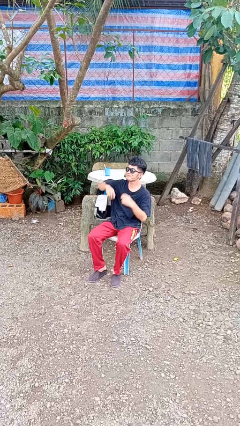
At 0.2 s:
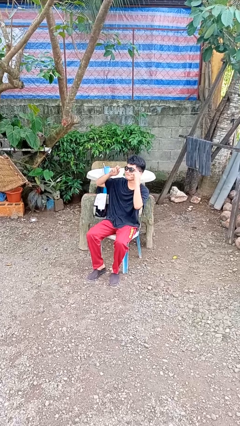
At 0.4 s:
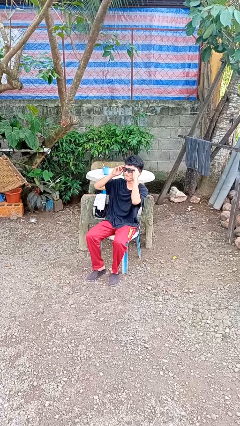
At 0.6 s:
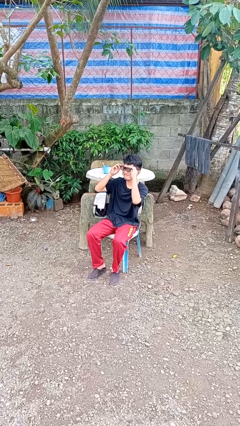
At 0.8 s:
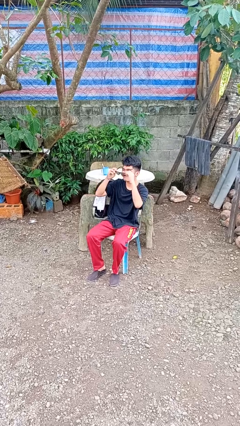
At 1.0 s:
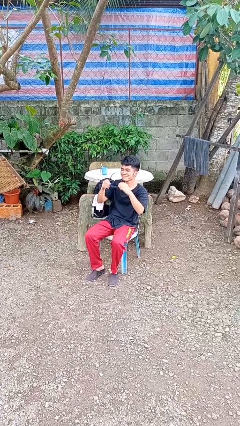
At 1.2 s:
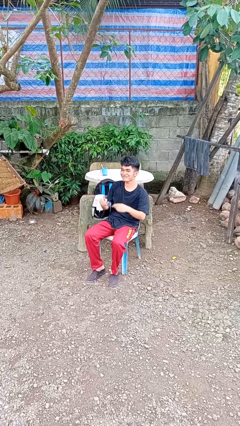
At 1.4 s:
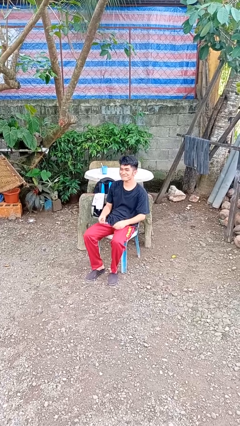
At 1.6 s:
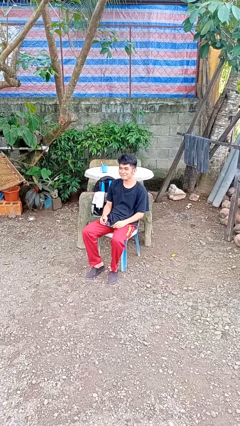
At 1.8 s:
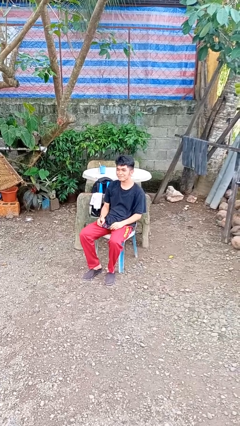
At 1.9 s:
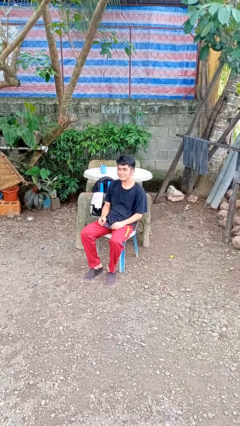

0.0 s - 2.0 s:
person takes off sunglasses

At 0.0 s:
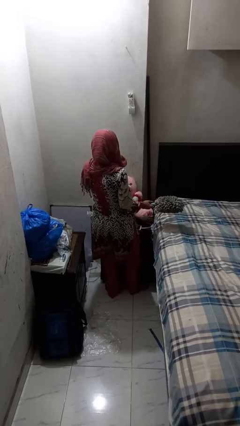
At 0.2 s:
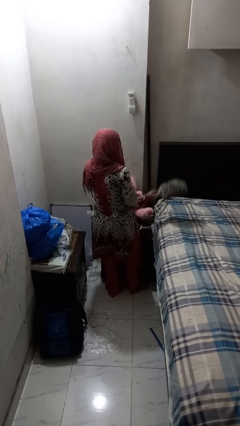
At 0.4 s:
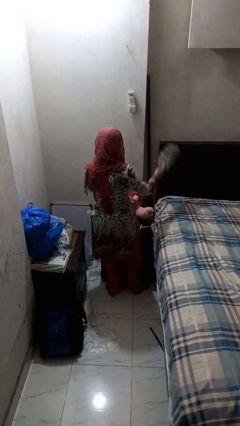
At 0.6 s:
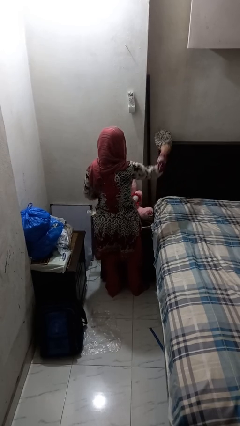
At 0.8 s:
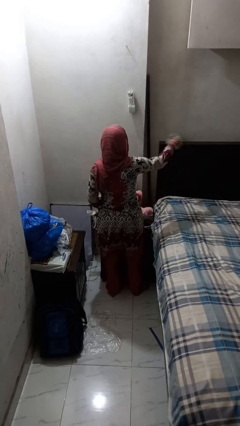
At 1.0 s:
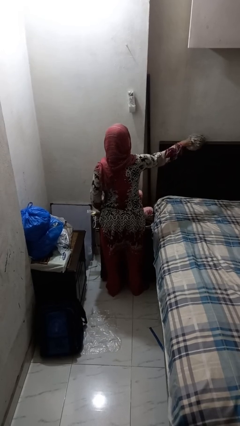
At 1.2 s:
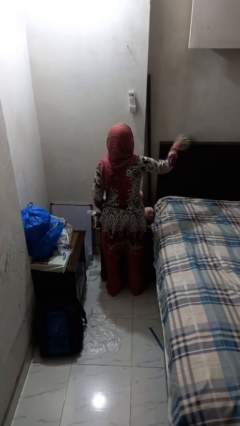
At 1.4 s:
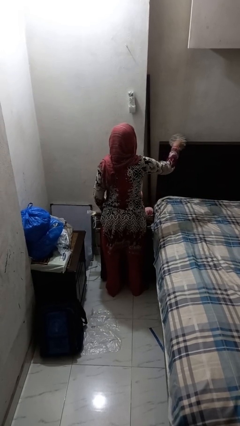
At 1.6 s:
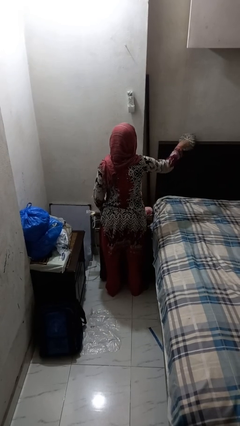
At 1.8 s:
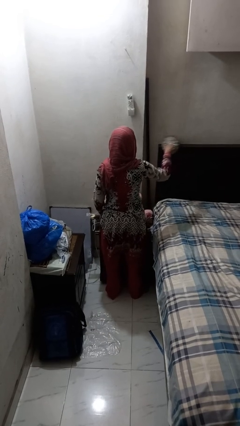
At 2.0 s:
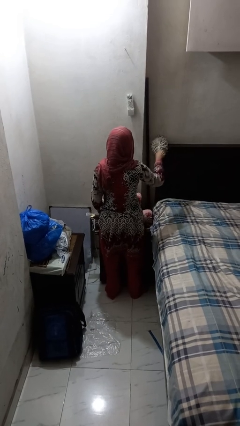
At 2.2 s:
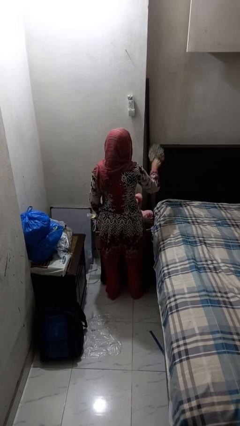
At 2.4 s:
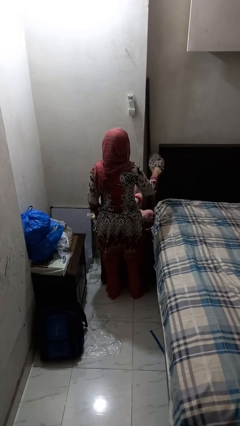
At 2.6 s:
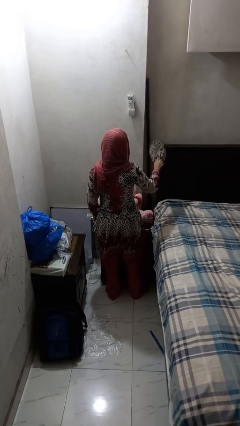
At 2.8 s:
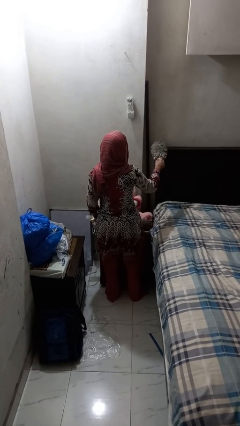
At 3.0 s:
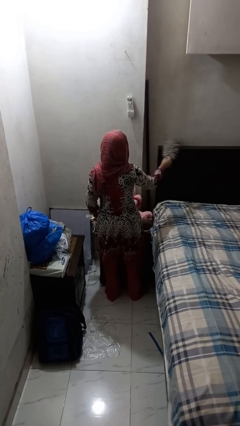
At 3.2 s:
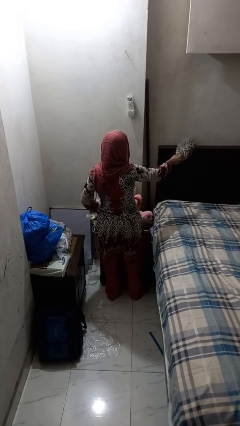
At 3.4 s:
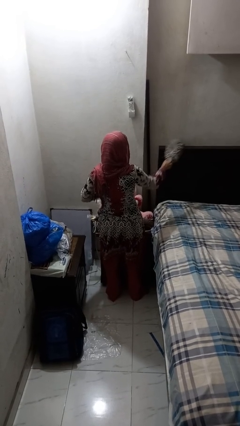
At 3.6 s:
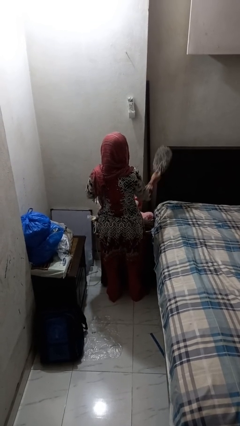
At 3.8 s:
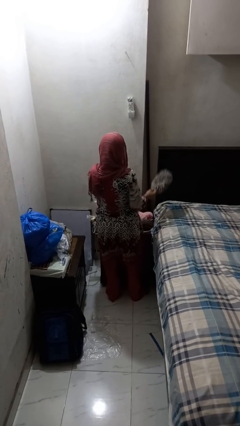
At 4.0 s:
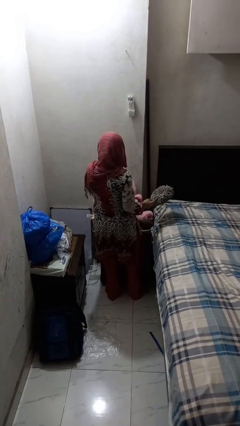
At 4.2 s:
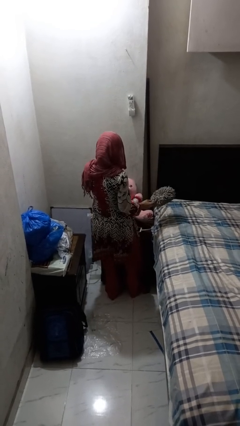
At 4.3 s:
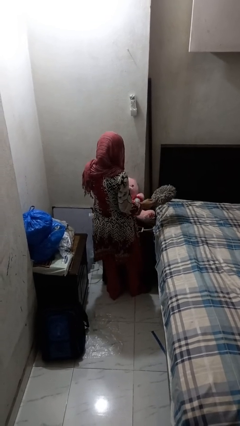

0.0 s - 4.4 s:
person dusts furniture

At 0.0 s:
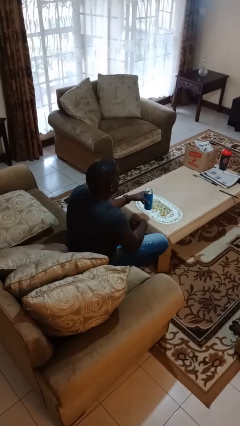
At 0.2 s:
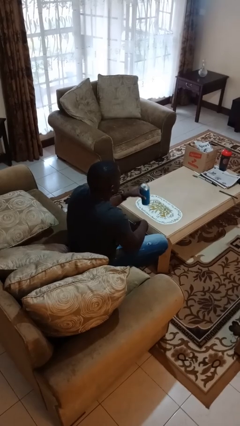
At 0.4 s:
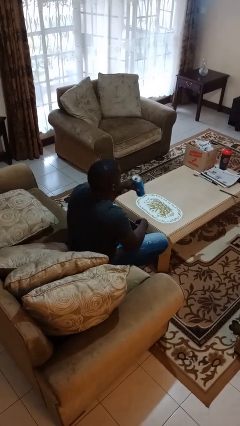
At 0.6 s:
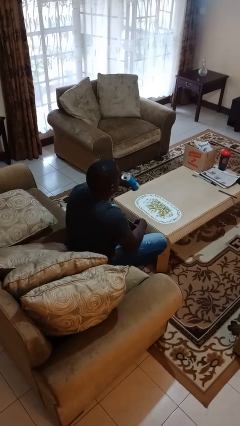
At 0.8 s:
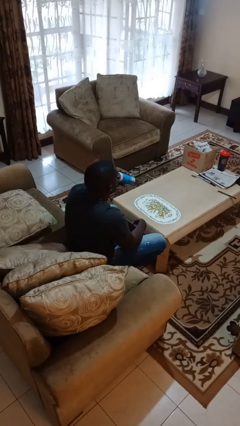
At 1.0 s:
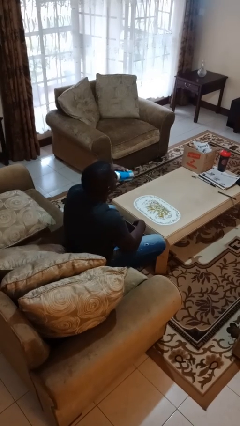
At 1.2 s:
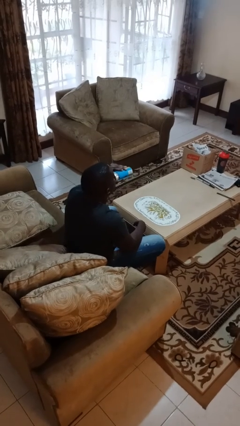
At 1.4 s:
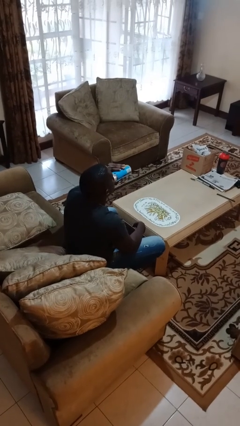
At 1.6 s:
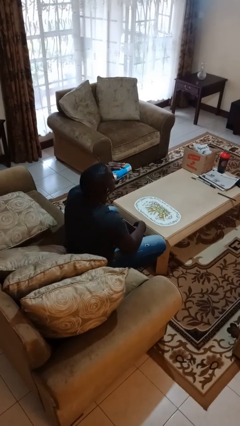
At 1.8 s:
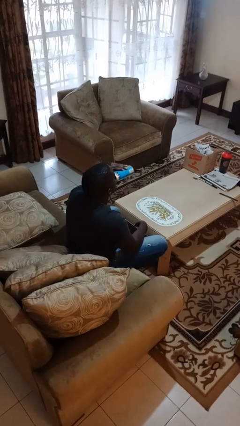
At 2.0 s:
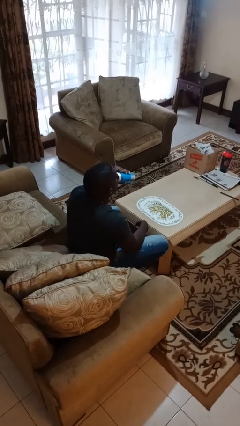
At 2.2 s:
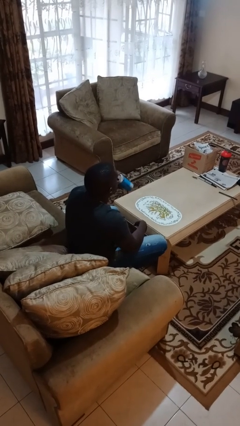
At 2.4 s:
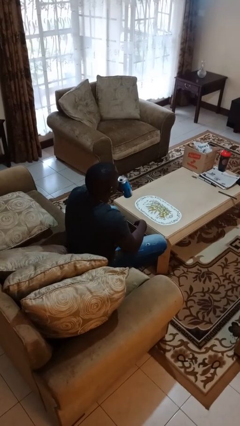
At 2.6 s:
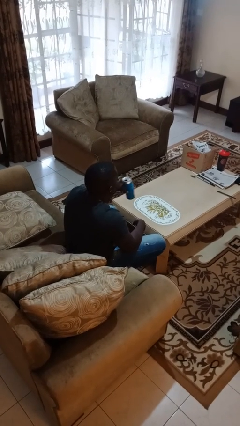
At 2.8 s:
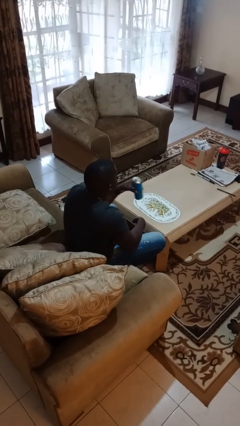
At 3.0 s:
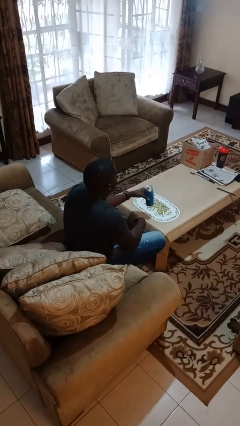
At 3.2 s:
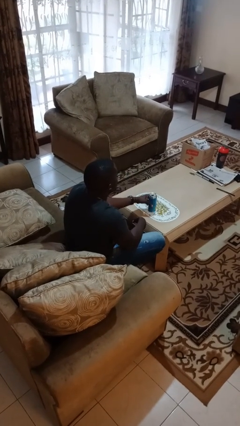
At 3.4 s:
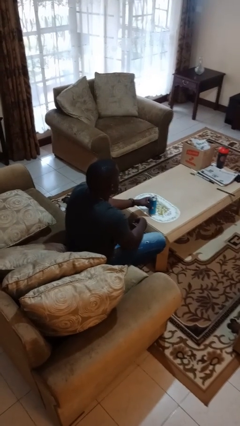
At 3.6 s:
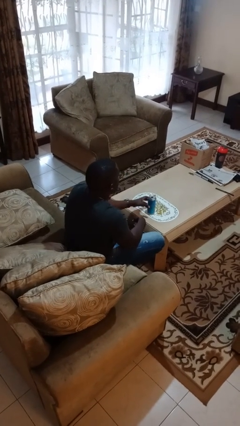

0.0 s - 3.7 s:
person drinks from beverage can

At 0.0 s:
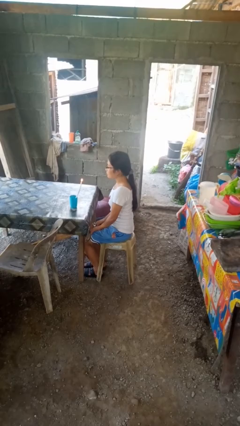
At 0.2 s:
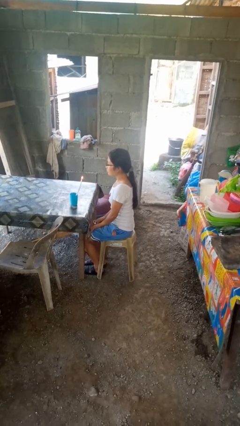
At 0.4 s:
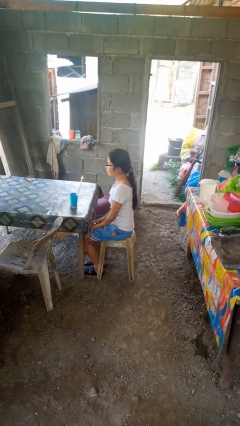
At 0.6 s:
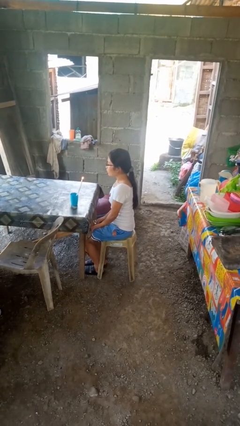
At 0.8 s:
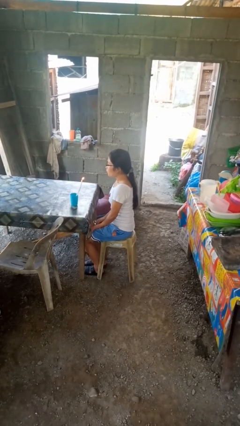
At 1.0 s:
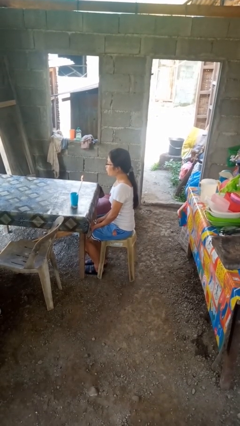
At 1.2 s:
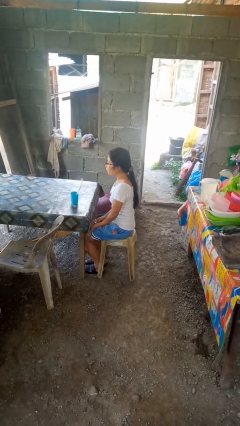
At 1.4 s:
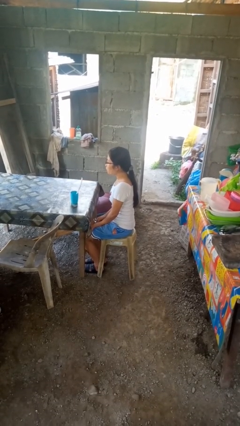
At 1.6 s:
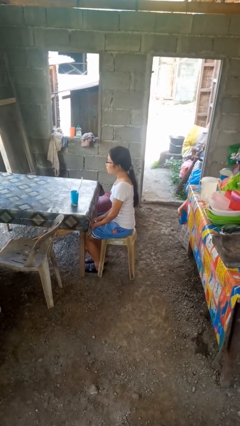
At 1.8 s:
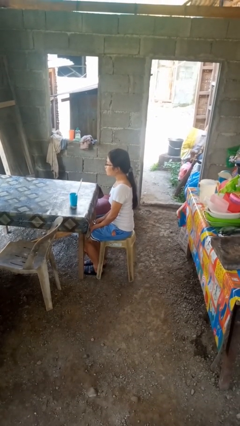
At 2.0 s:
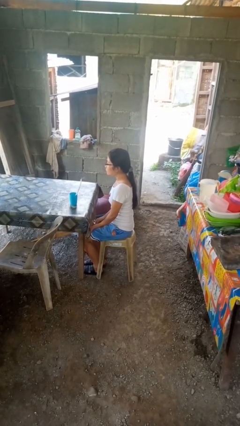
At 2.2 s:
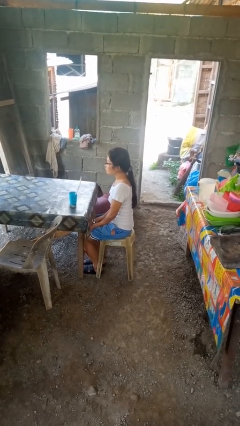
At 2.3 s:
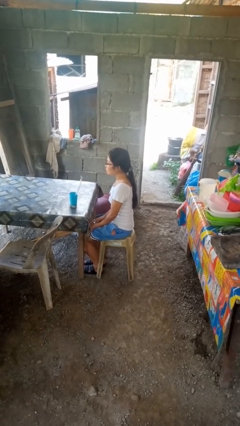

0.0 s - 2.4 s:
person extinguishes candle

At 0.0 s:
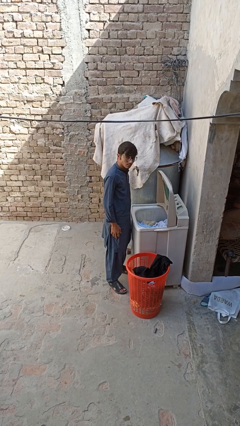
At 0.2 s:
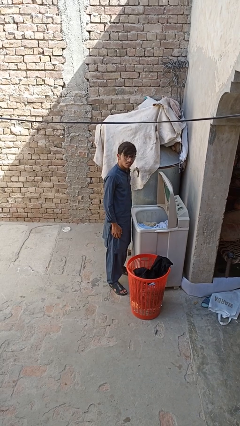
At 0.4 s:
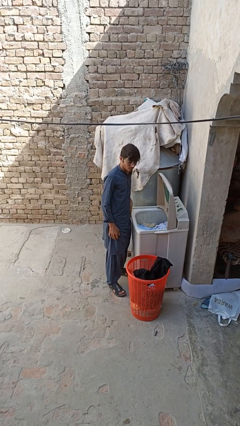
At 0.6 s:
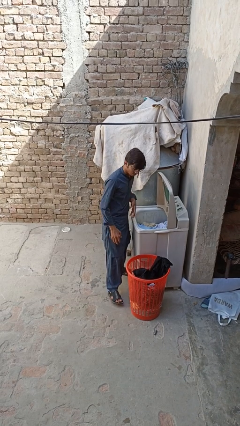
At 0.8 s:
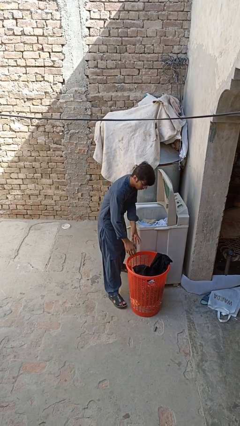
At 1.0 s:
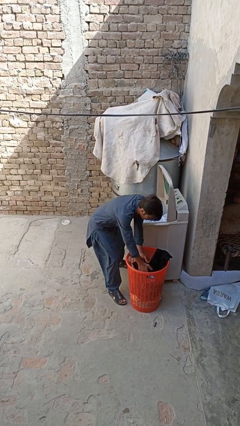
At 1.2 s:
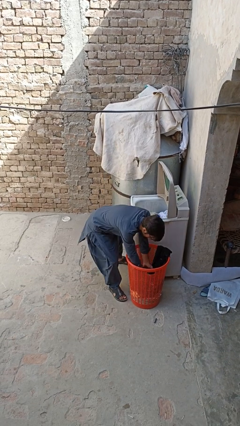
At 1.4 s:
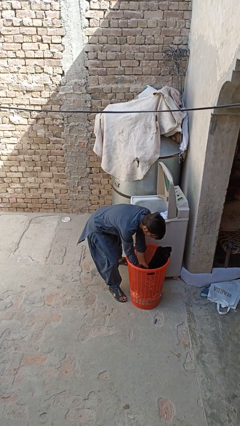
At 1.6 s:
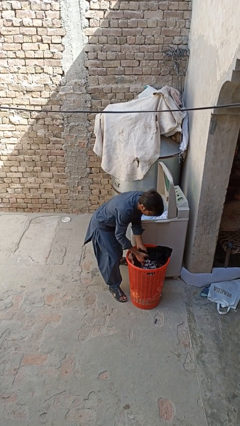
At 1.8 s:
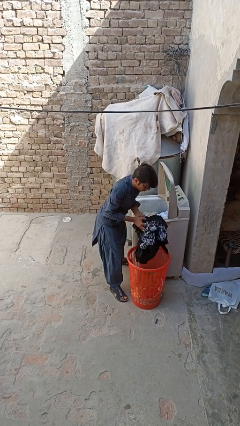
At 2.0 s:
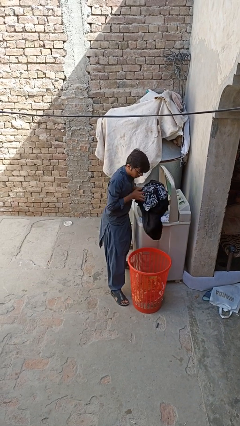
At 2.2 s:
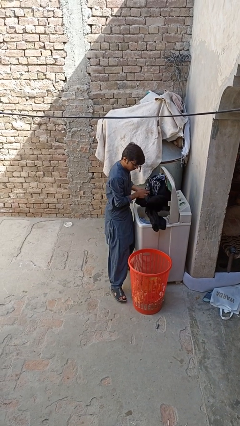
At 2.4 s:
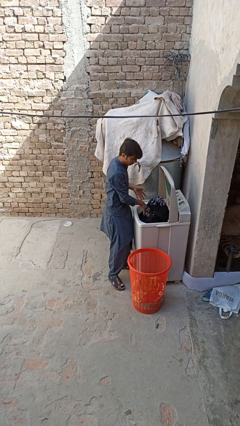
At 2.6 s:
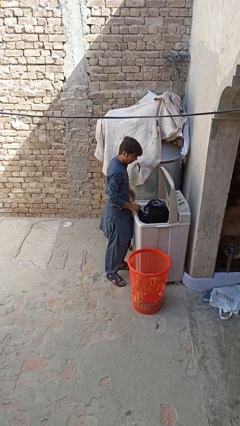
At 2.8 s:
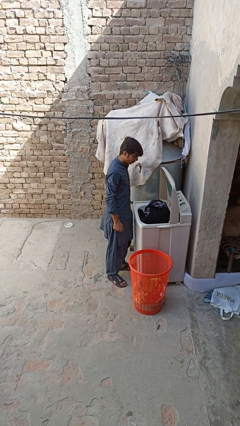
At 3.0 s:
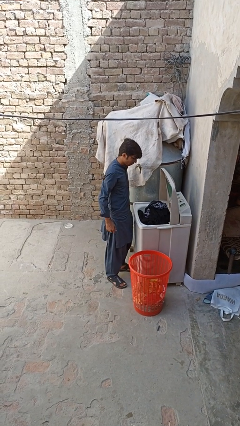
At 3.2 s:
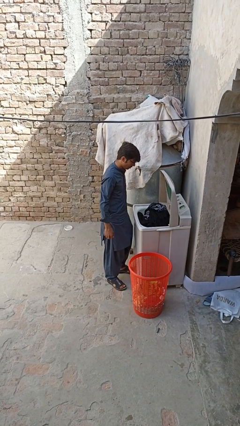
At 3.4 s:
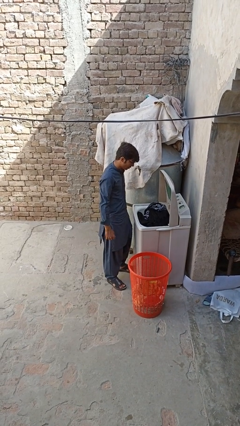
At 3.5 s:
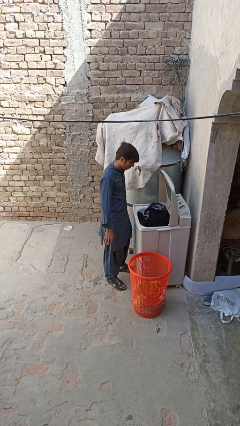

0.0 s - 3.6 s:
person loads clotheswasher

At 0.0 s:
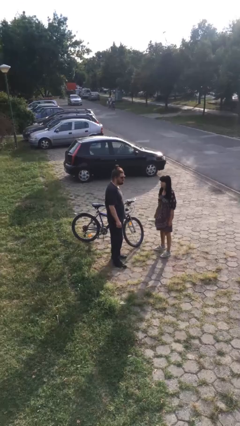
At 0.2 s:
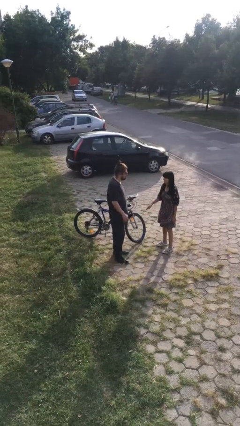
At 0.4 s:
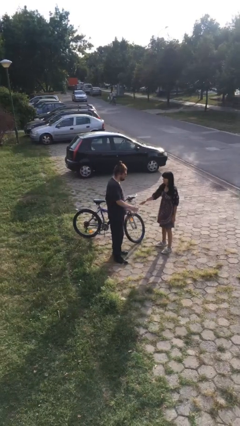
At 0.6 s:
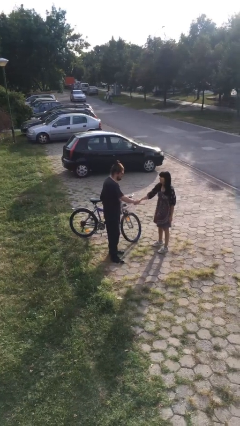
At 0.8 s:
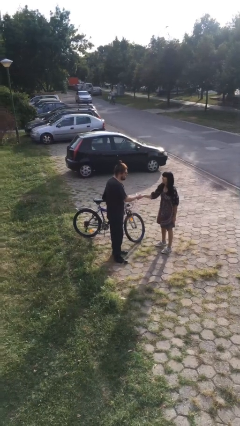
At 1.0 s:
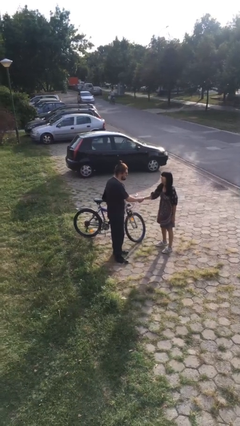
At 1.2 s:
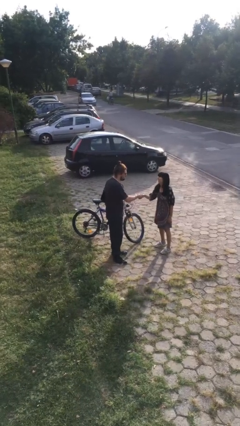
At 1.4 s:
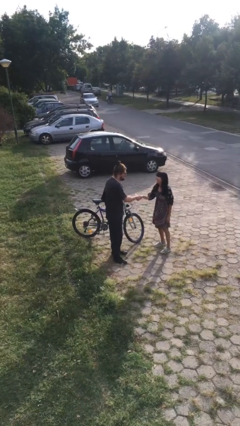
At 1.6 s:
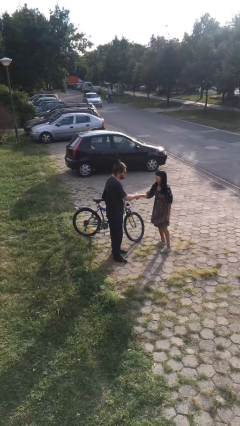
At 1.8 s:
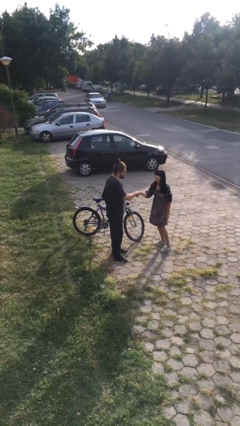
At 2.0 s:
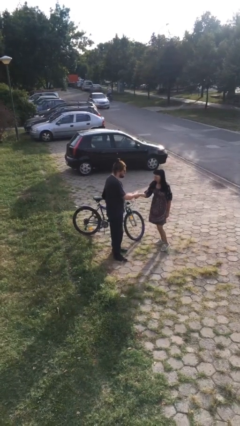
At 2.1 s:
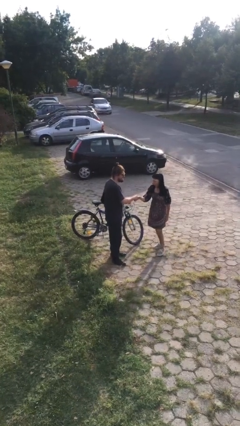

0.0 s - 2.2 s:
person shakes hand
